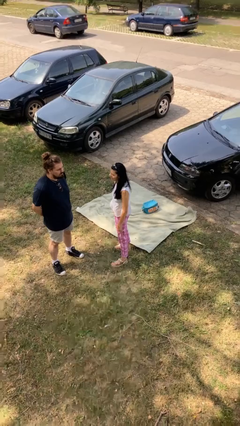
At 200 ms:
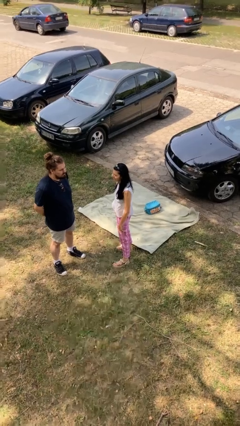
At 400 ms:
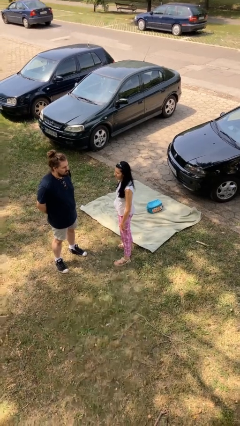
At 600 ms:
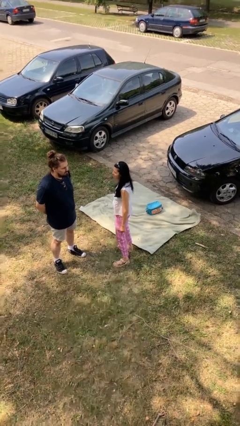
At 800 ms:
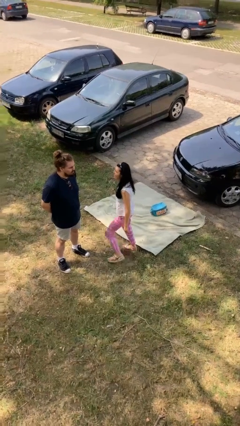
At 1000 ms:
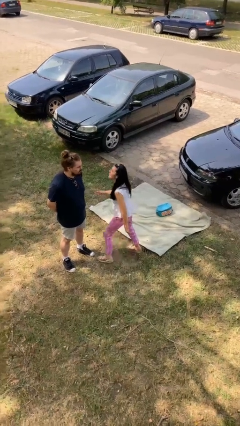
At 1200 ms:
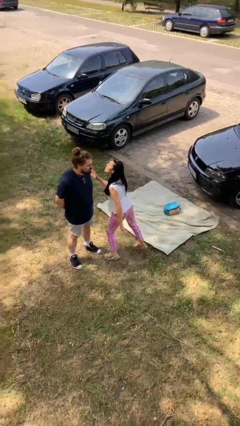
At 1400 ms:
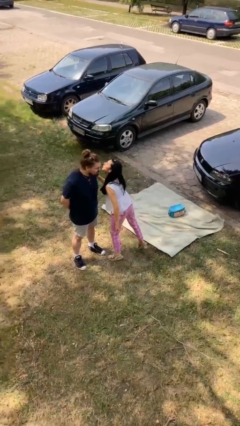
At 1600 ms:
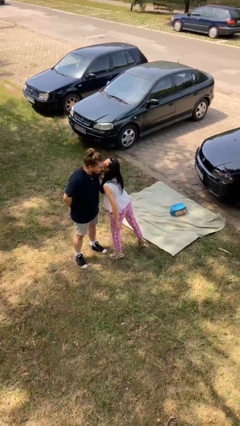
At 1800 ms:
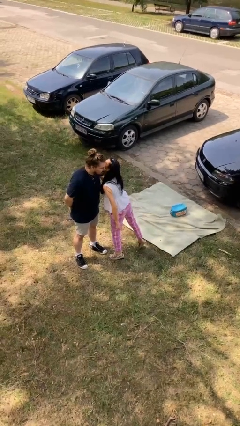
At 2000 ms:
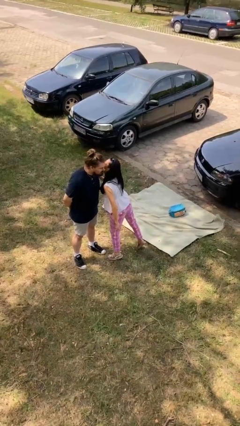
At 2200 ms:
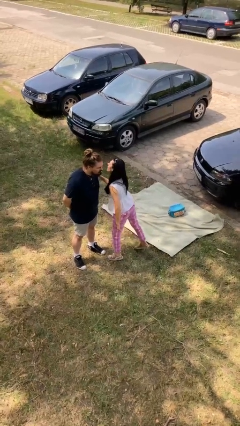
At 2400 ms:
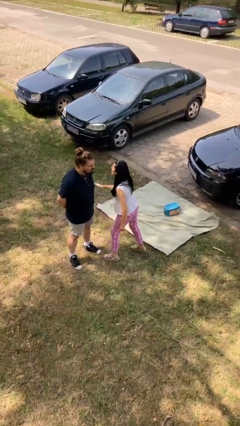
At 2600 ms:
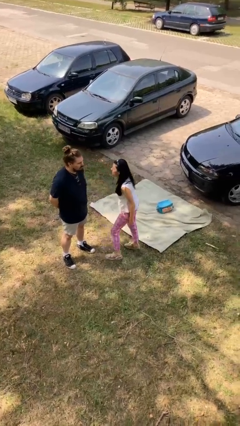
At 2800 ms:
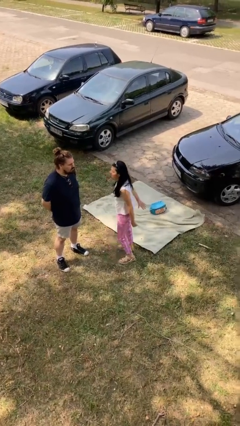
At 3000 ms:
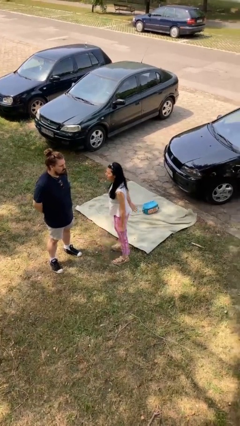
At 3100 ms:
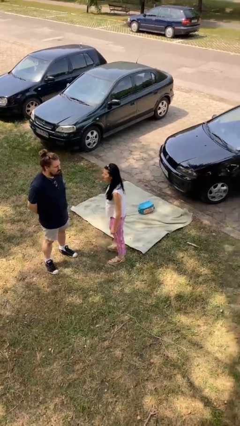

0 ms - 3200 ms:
person kisses cheek of person

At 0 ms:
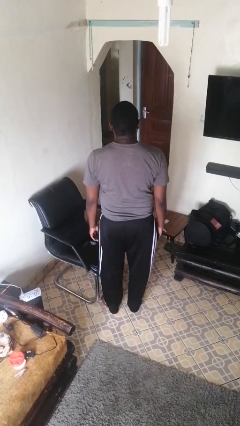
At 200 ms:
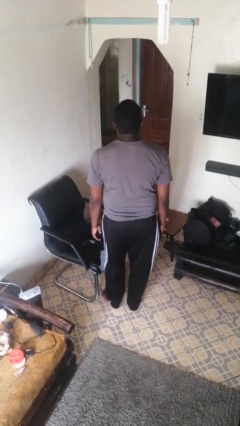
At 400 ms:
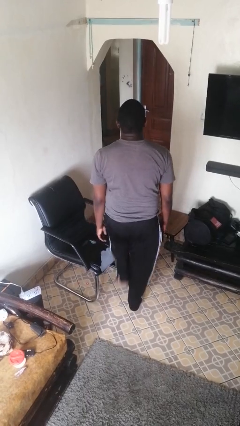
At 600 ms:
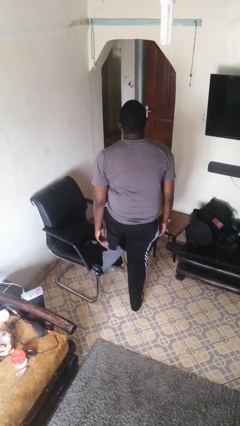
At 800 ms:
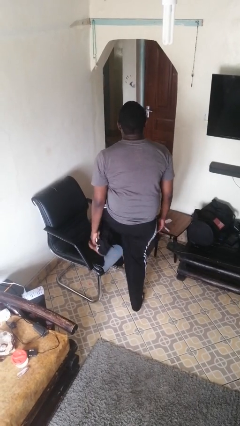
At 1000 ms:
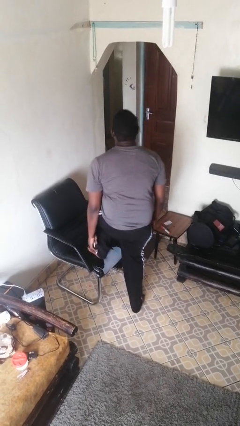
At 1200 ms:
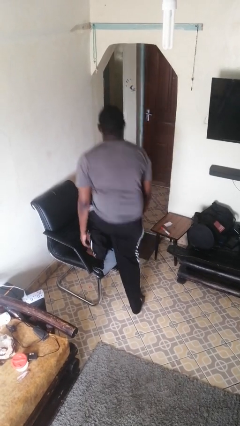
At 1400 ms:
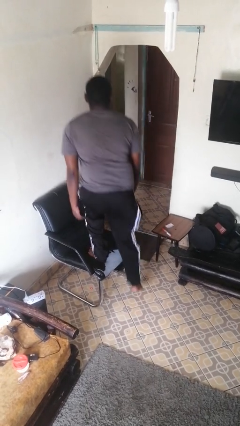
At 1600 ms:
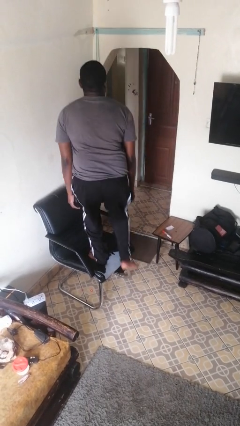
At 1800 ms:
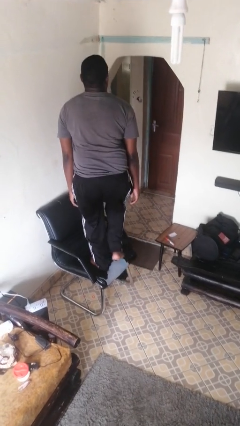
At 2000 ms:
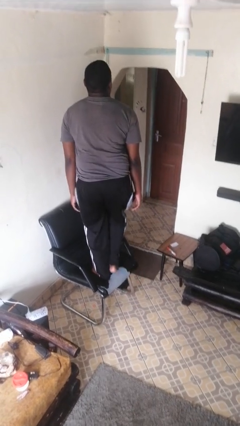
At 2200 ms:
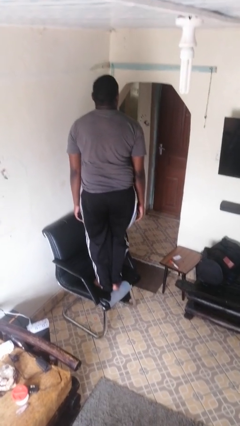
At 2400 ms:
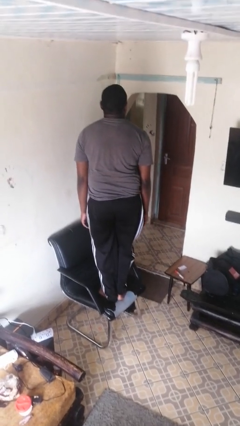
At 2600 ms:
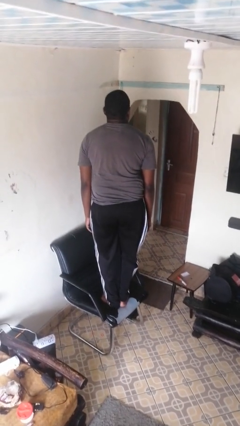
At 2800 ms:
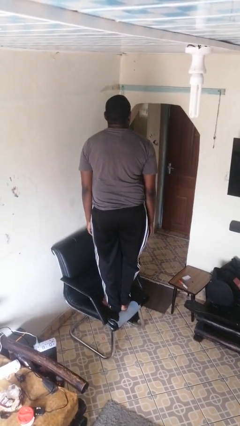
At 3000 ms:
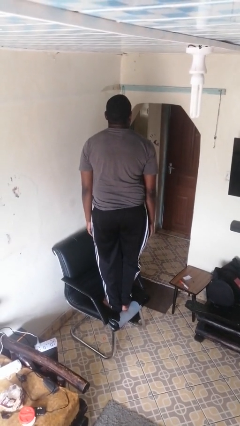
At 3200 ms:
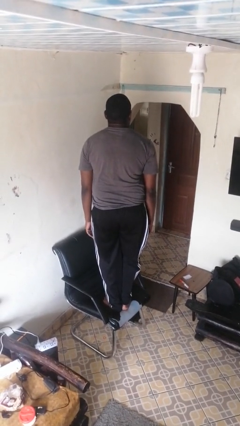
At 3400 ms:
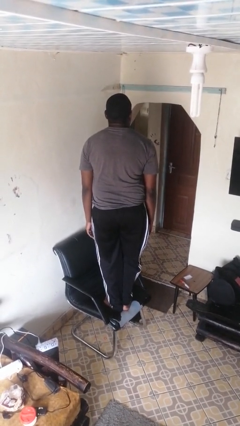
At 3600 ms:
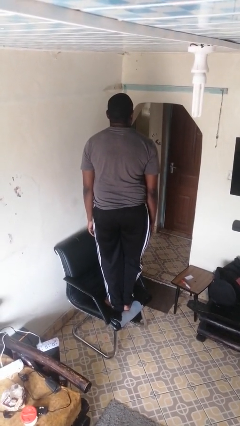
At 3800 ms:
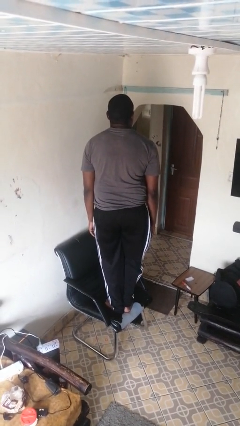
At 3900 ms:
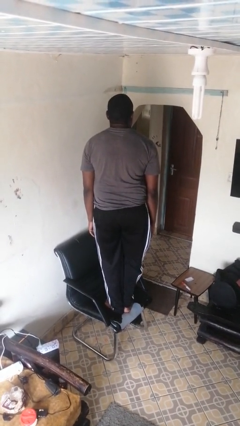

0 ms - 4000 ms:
person climbs on chair

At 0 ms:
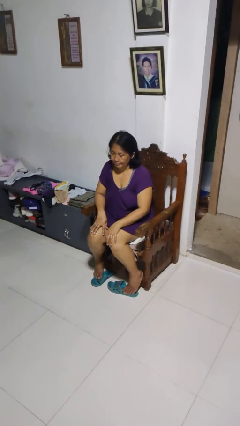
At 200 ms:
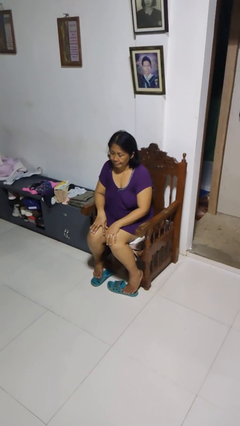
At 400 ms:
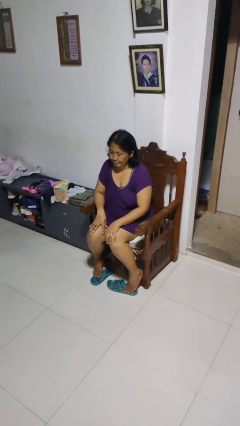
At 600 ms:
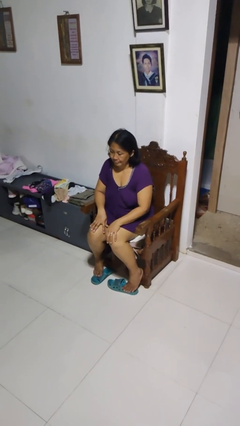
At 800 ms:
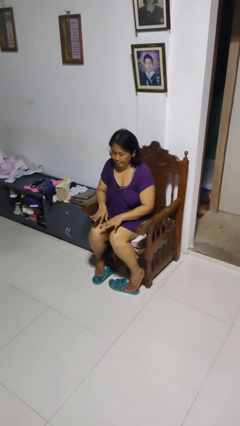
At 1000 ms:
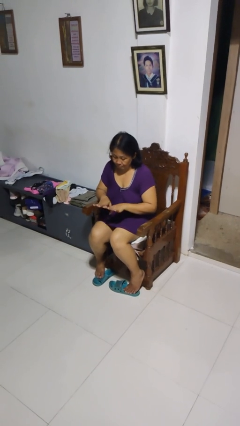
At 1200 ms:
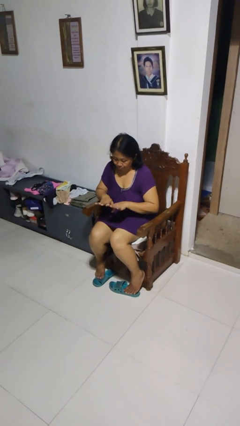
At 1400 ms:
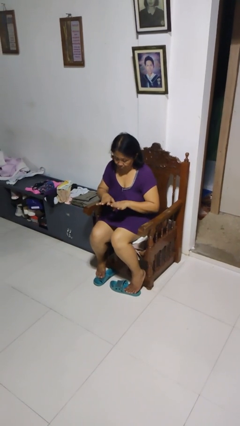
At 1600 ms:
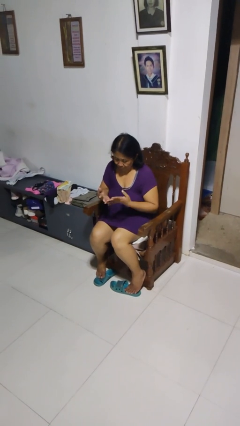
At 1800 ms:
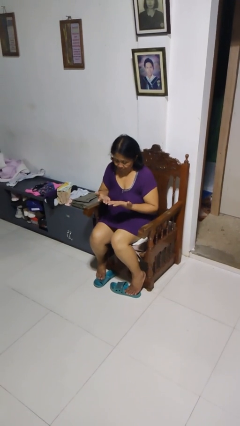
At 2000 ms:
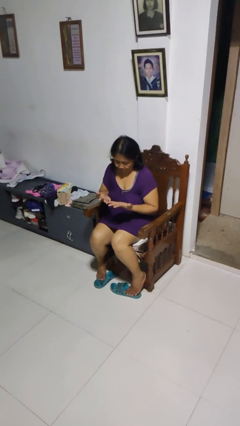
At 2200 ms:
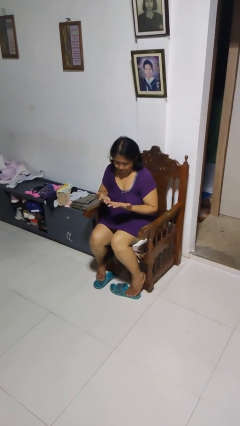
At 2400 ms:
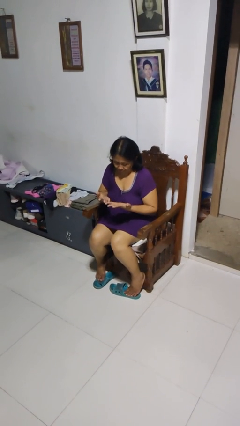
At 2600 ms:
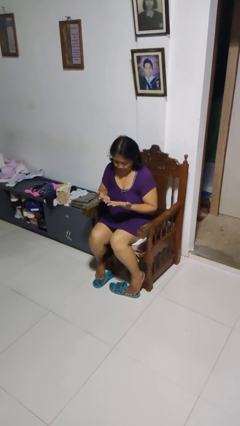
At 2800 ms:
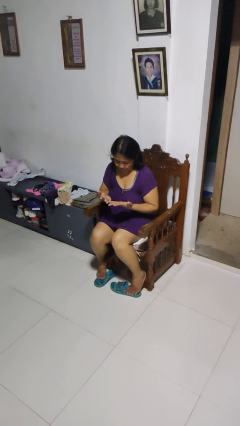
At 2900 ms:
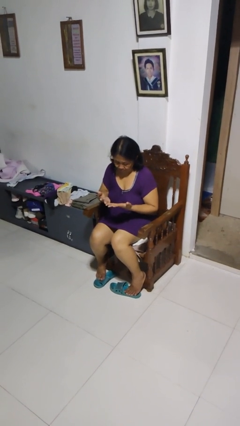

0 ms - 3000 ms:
person looks at hands in lap

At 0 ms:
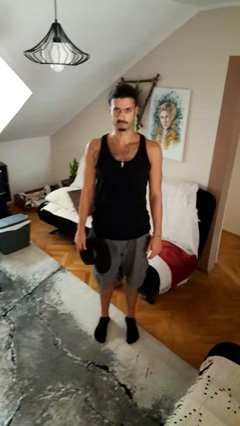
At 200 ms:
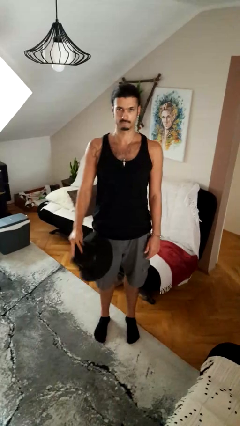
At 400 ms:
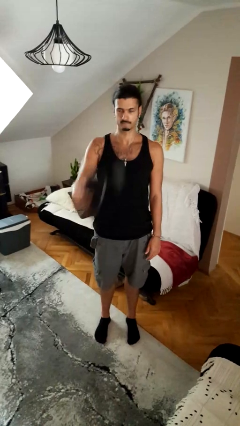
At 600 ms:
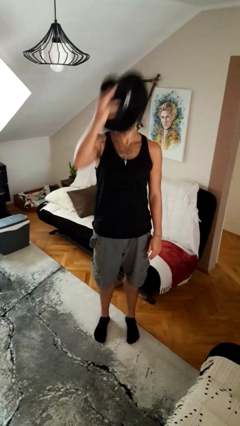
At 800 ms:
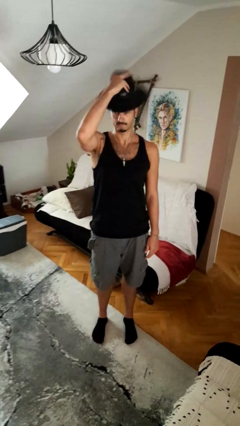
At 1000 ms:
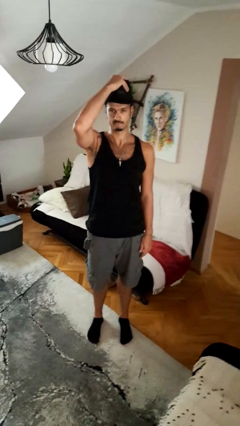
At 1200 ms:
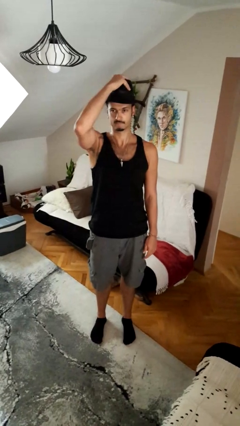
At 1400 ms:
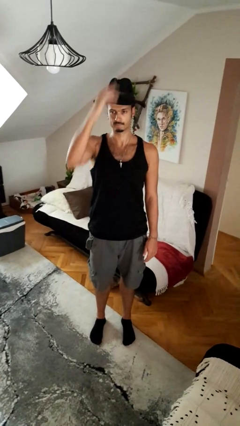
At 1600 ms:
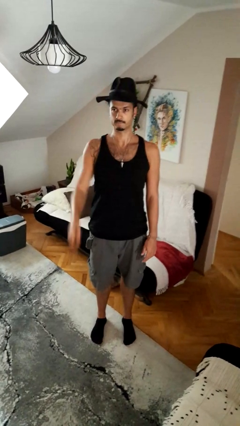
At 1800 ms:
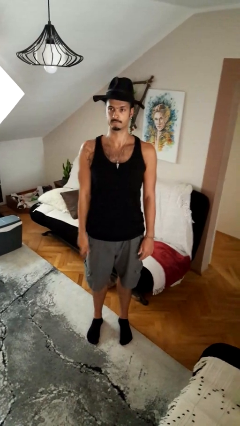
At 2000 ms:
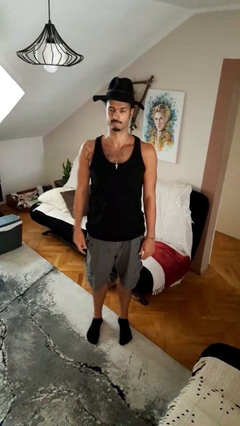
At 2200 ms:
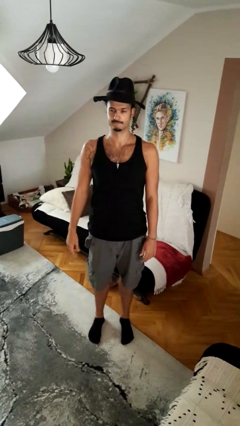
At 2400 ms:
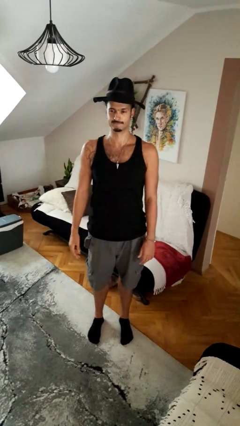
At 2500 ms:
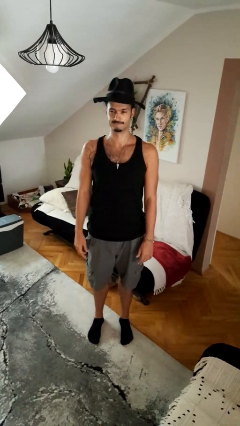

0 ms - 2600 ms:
person puts on hat

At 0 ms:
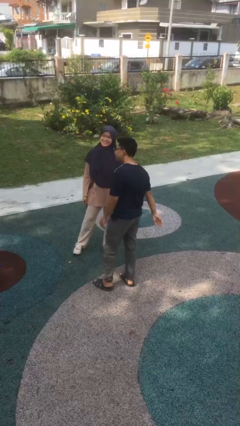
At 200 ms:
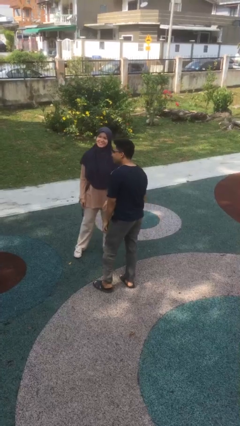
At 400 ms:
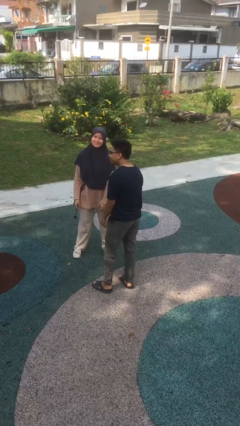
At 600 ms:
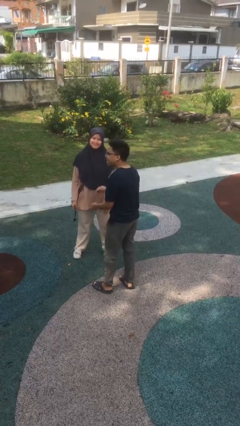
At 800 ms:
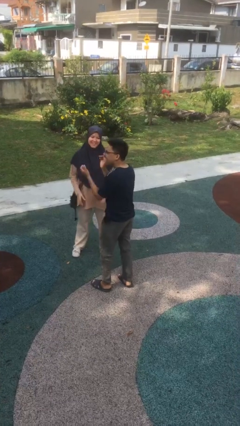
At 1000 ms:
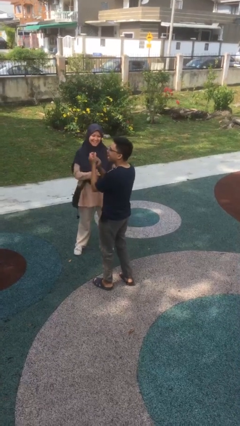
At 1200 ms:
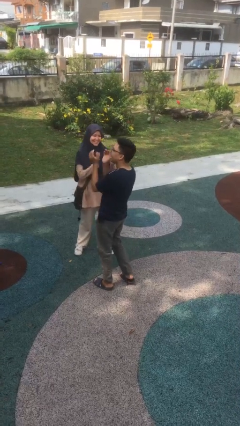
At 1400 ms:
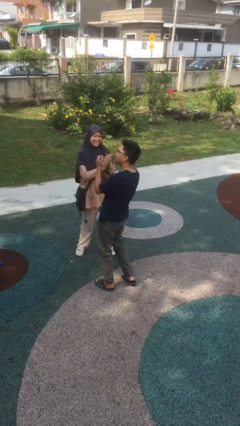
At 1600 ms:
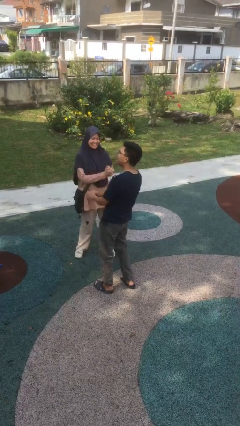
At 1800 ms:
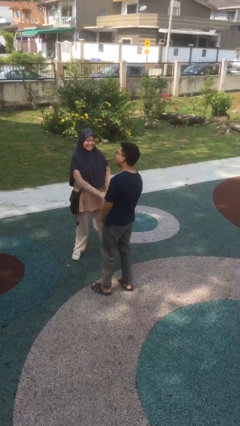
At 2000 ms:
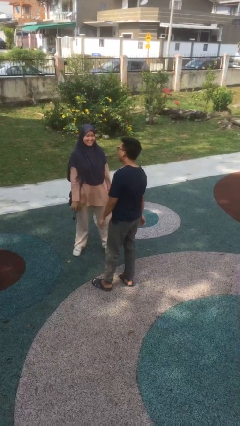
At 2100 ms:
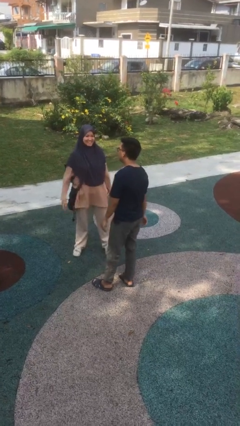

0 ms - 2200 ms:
person laughs with person

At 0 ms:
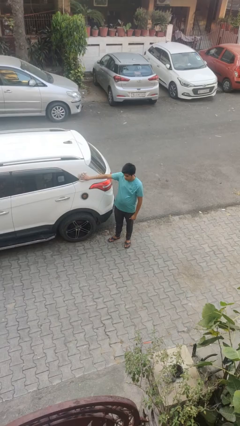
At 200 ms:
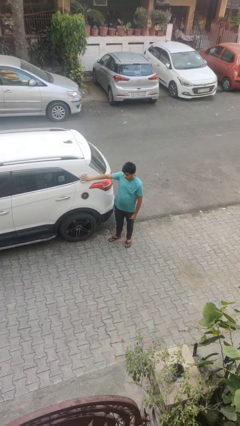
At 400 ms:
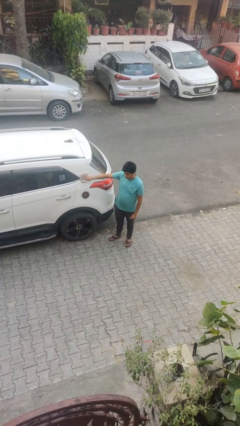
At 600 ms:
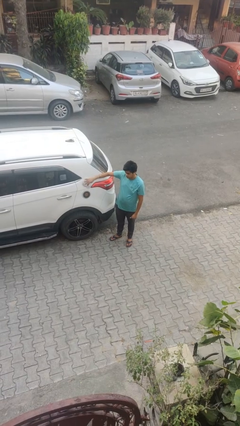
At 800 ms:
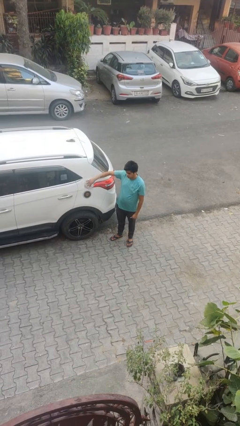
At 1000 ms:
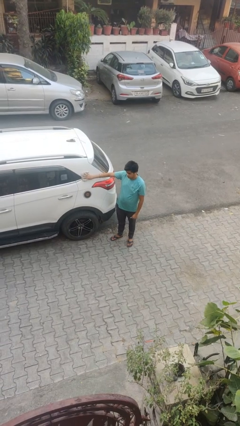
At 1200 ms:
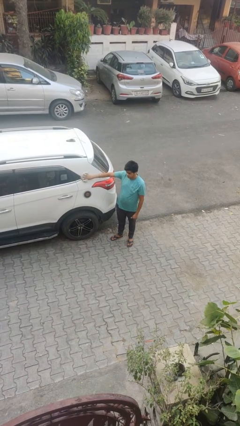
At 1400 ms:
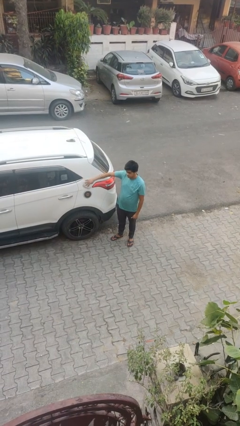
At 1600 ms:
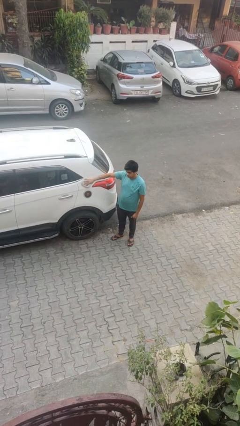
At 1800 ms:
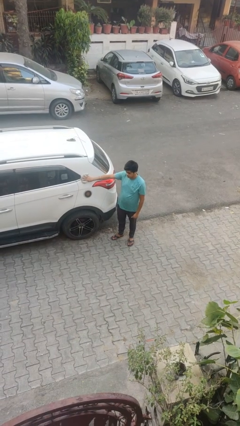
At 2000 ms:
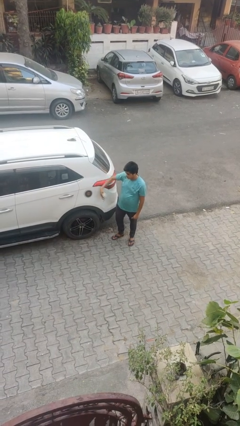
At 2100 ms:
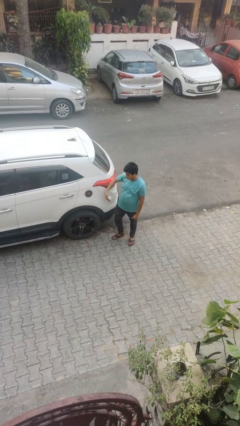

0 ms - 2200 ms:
person polishes car with rag

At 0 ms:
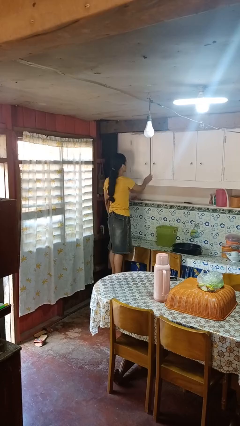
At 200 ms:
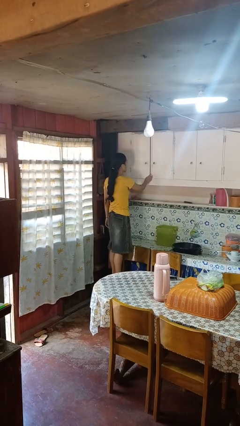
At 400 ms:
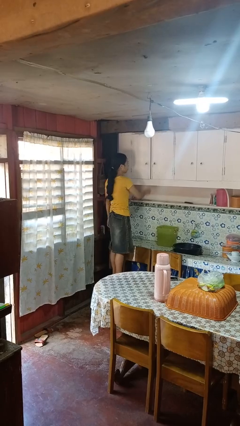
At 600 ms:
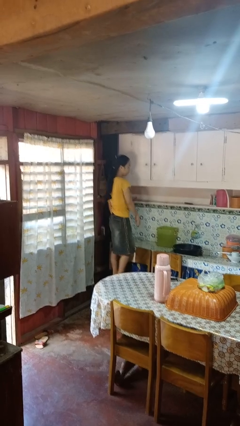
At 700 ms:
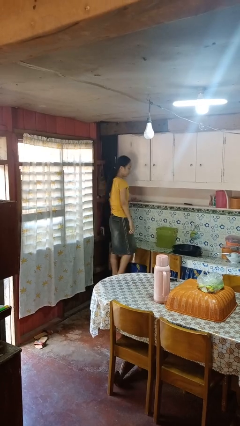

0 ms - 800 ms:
person closes cabinet
